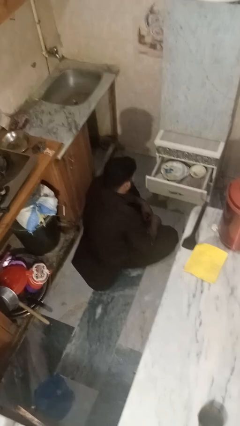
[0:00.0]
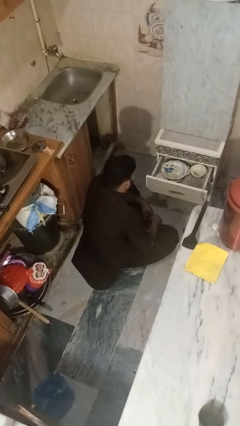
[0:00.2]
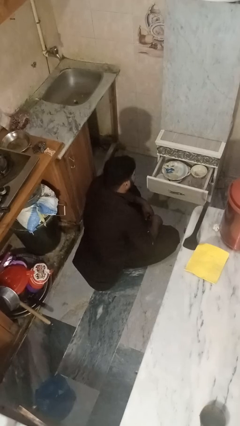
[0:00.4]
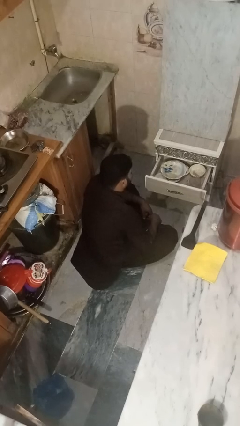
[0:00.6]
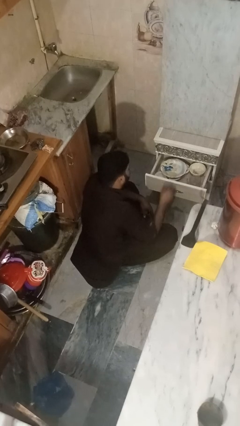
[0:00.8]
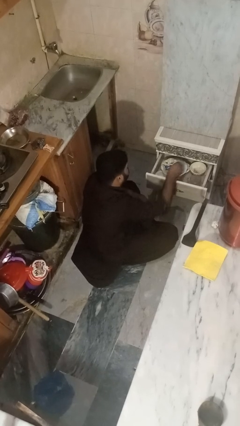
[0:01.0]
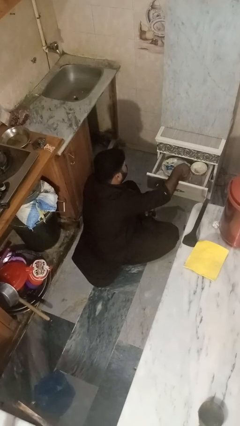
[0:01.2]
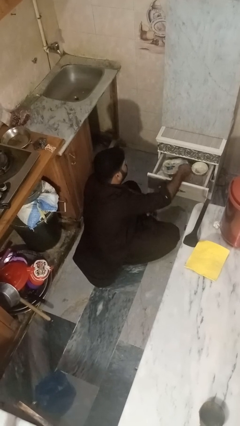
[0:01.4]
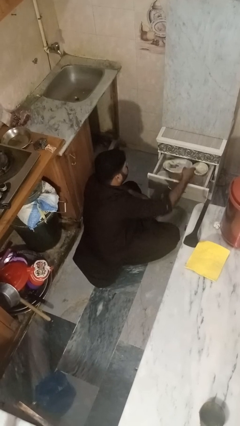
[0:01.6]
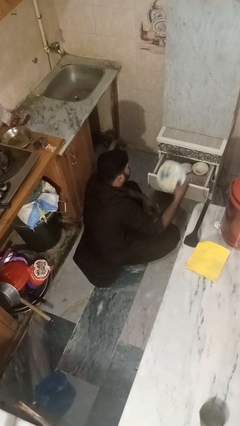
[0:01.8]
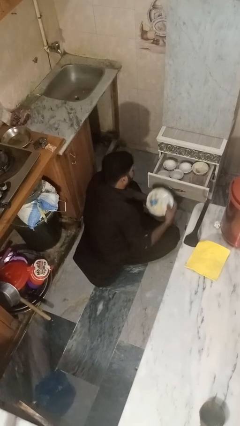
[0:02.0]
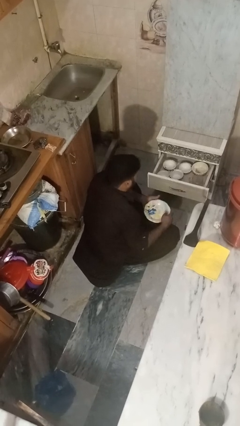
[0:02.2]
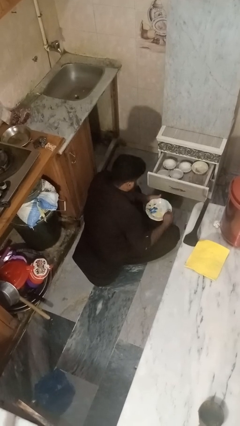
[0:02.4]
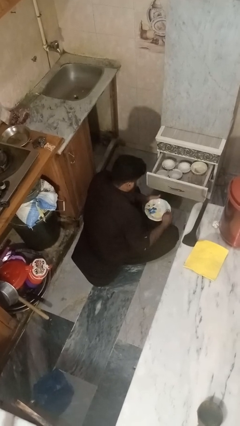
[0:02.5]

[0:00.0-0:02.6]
person takes object from kitchen drawer

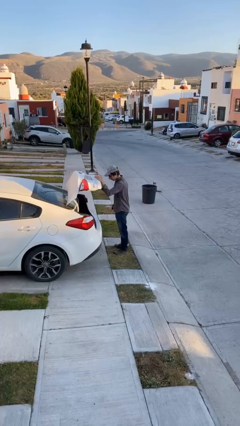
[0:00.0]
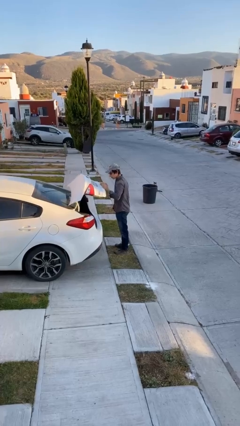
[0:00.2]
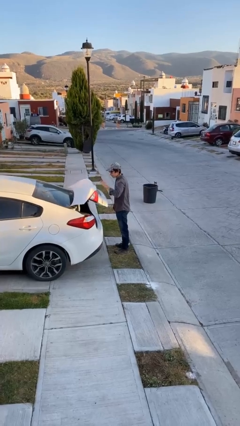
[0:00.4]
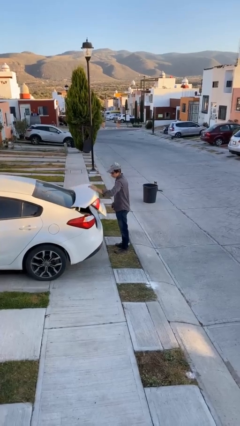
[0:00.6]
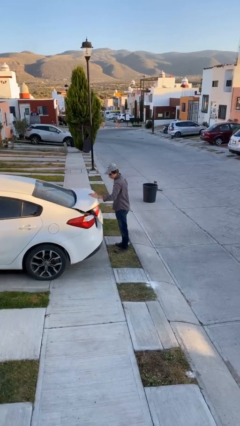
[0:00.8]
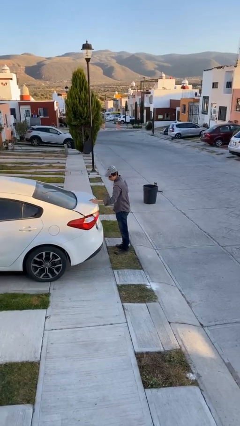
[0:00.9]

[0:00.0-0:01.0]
person closes car trunk

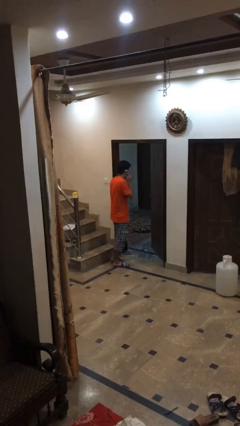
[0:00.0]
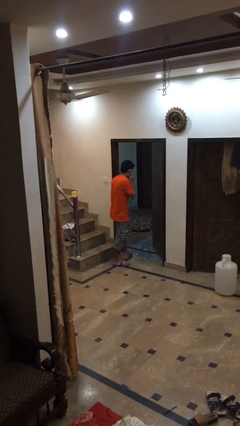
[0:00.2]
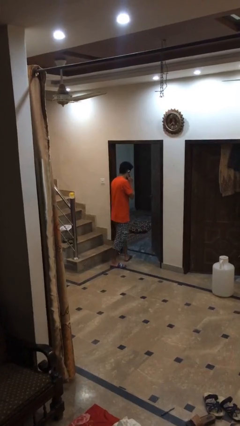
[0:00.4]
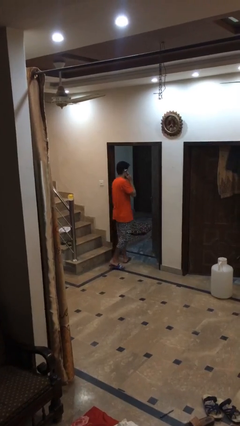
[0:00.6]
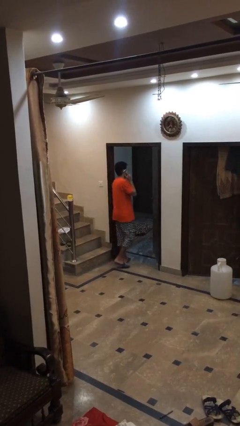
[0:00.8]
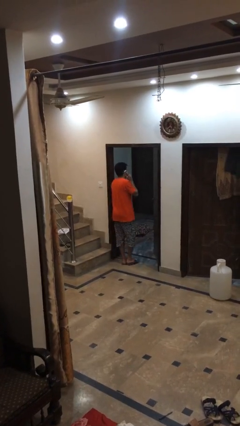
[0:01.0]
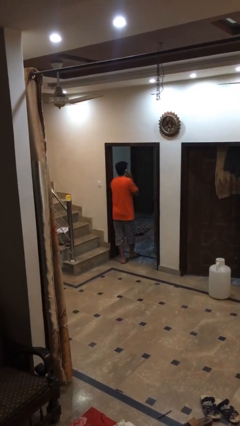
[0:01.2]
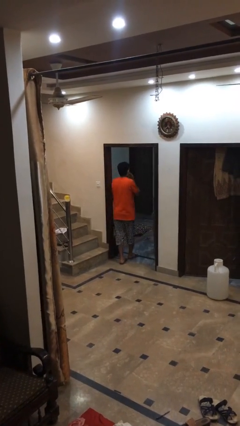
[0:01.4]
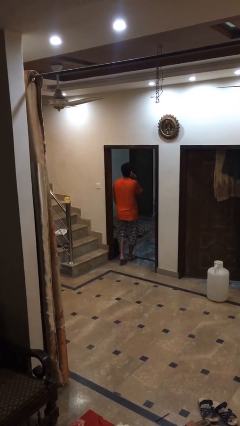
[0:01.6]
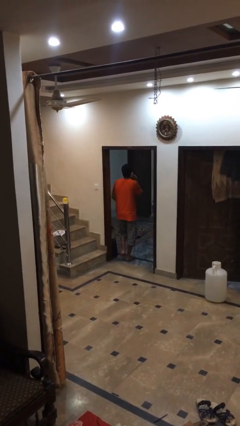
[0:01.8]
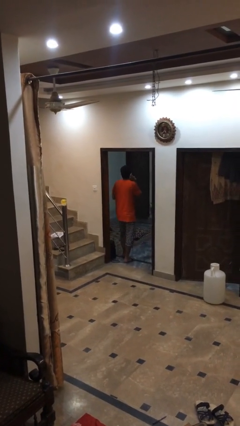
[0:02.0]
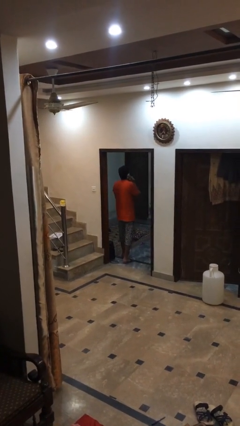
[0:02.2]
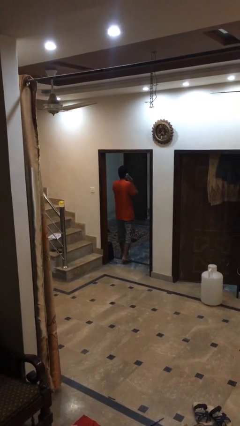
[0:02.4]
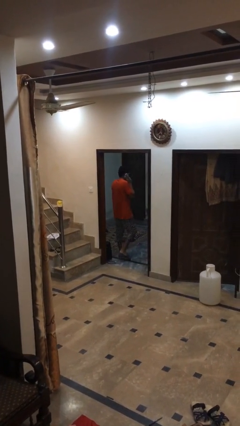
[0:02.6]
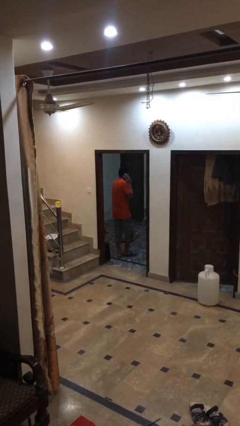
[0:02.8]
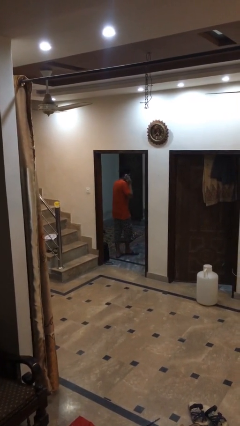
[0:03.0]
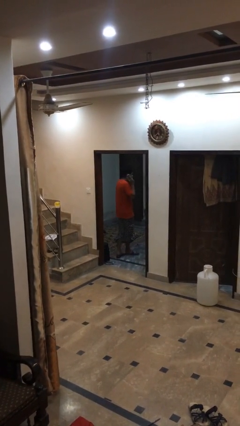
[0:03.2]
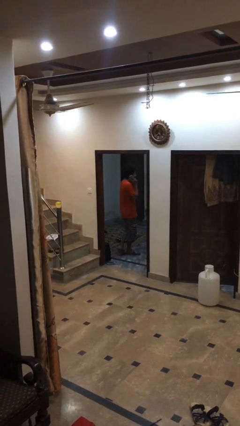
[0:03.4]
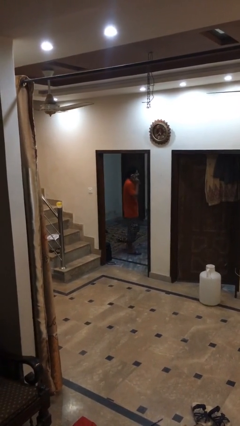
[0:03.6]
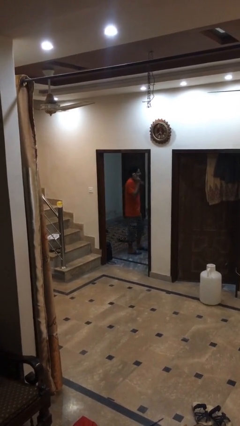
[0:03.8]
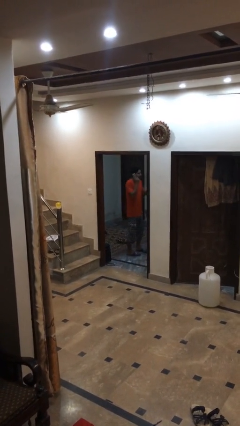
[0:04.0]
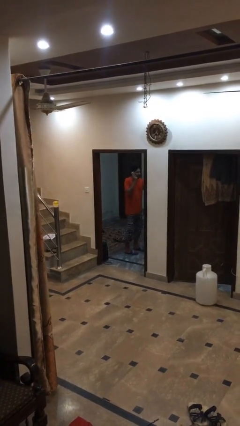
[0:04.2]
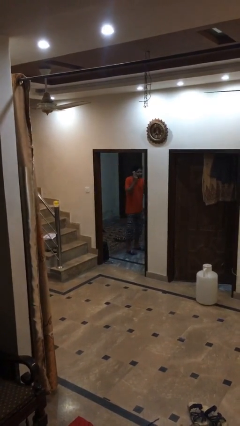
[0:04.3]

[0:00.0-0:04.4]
person exits scene through structure

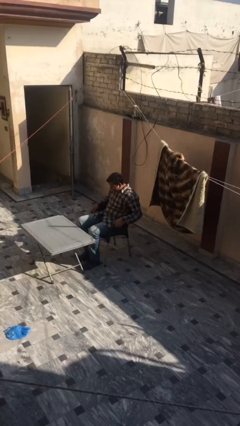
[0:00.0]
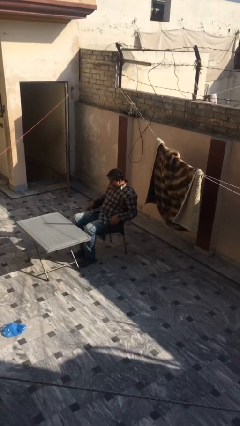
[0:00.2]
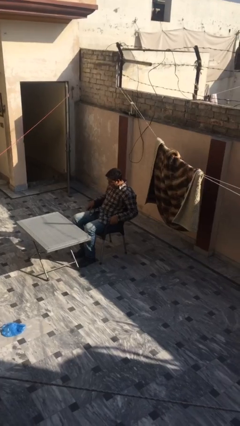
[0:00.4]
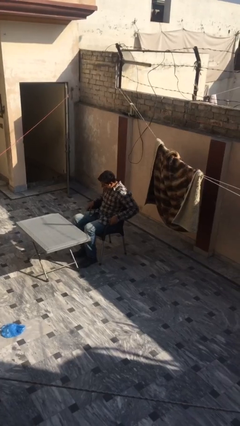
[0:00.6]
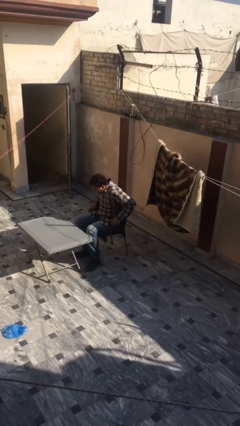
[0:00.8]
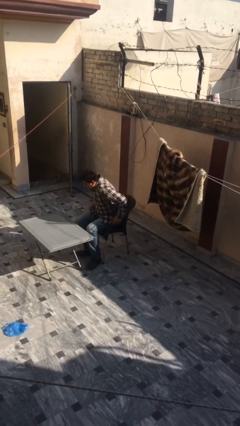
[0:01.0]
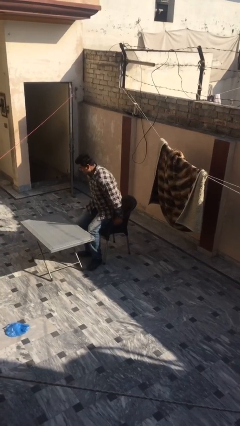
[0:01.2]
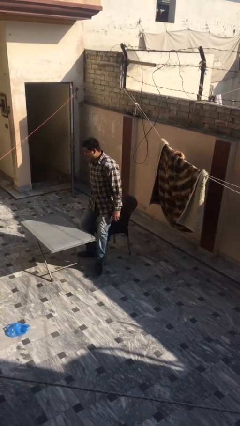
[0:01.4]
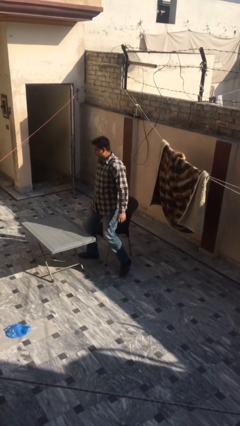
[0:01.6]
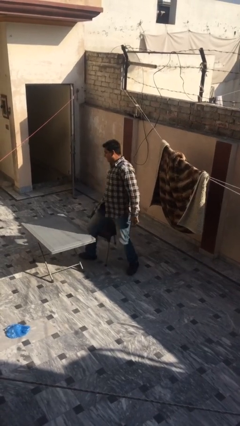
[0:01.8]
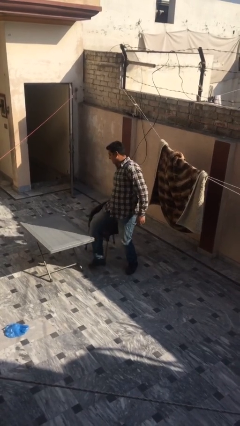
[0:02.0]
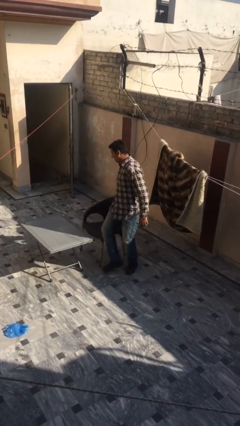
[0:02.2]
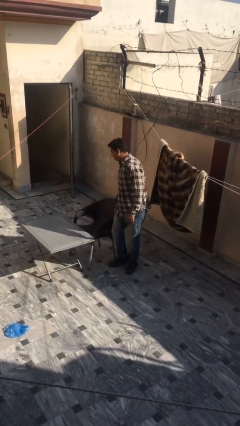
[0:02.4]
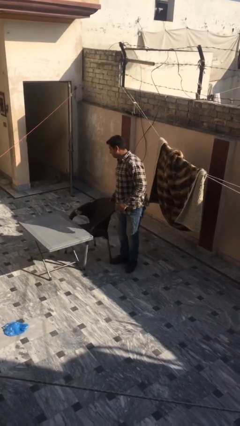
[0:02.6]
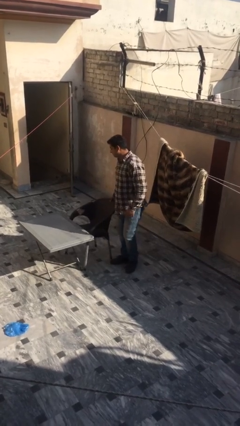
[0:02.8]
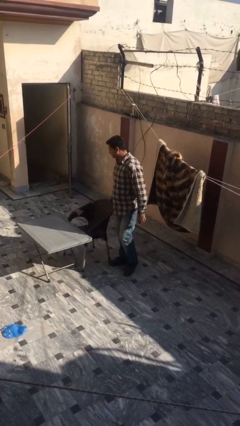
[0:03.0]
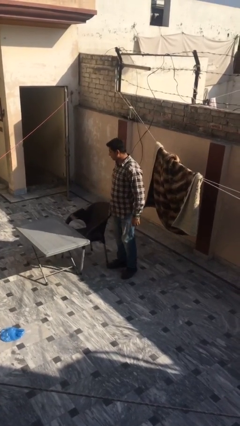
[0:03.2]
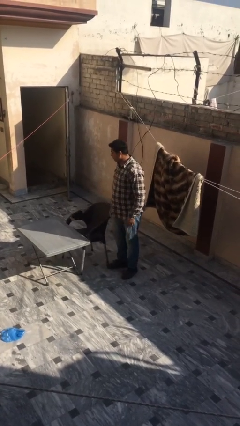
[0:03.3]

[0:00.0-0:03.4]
person stands up

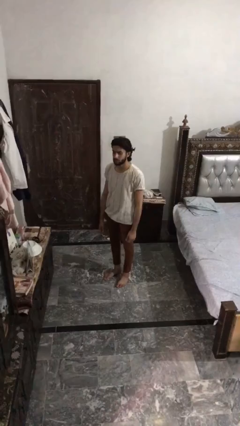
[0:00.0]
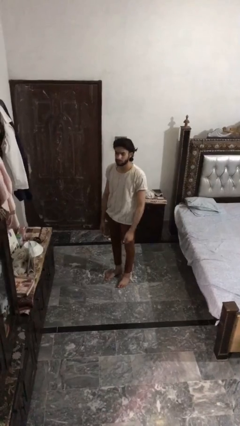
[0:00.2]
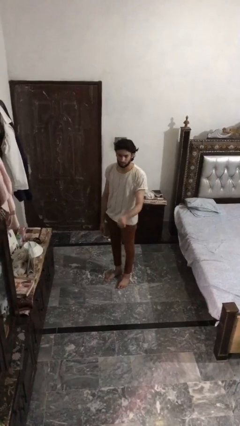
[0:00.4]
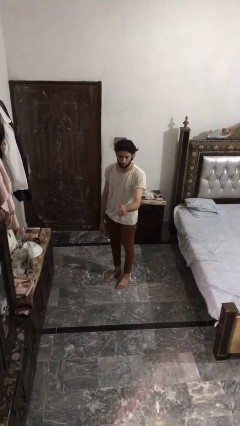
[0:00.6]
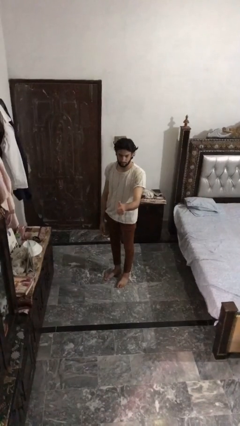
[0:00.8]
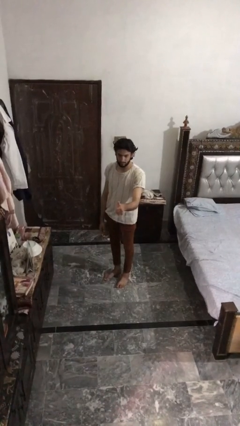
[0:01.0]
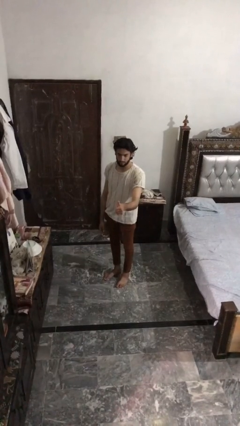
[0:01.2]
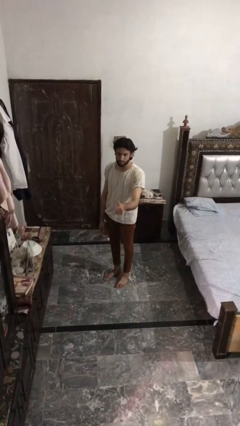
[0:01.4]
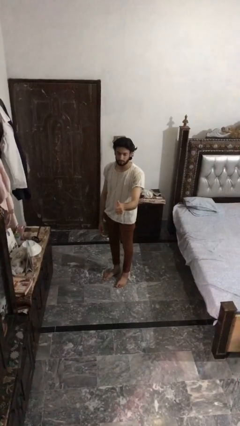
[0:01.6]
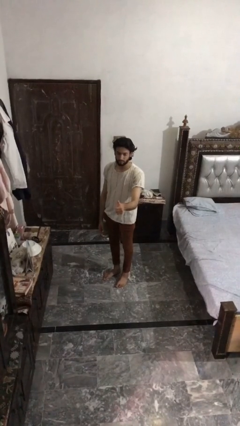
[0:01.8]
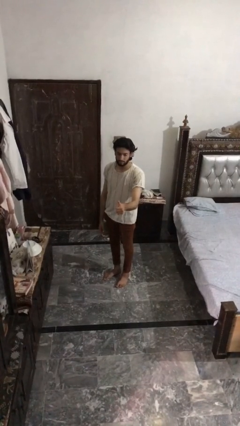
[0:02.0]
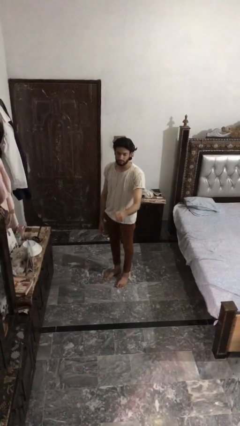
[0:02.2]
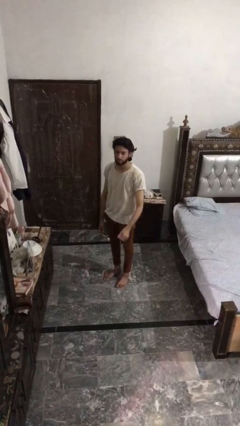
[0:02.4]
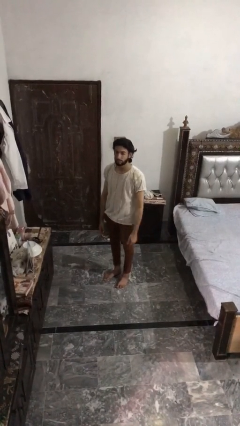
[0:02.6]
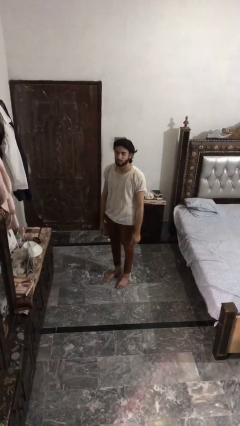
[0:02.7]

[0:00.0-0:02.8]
person gestures thumbs up

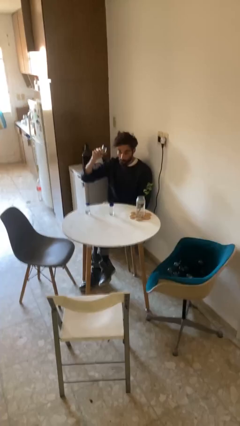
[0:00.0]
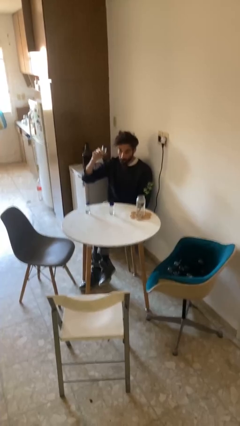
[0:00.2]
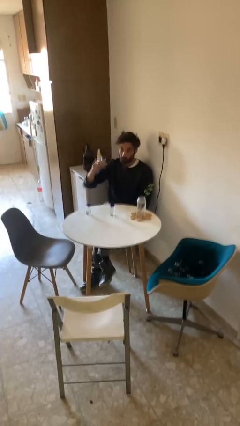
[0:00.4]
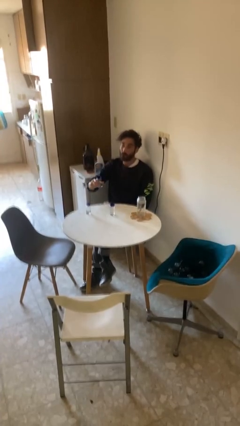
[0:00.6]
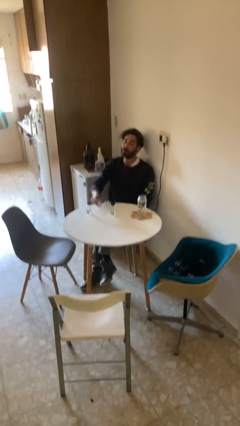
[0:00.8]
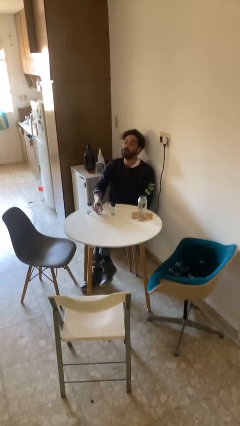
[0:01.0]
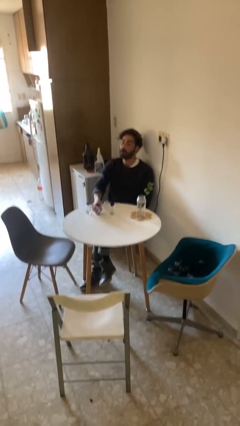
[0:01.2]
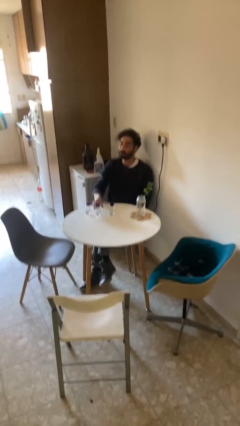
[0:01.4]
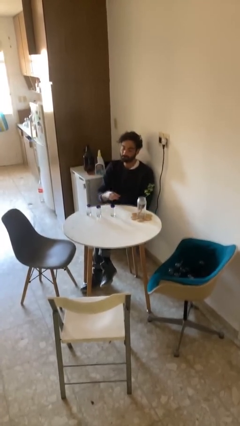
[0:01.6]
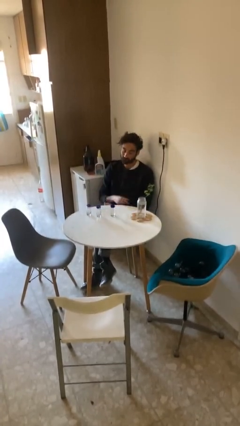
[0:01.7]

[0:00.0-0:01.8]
person puts down object on table

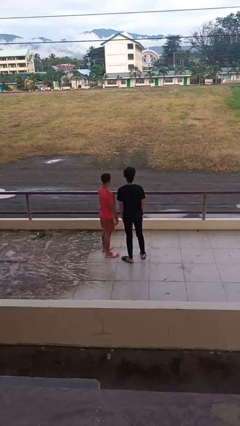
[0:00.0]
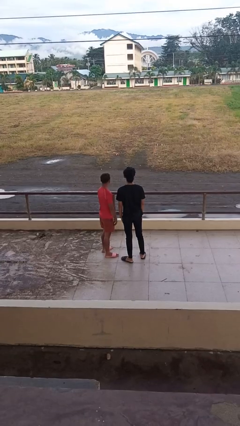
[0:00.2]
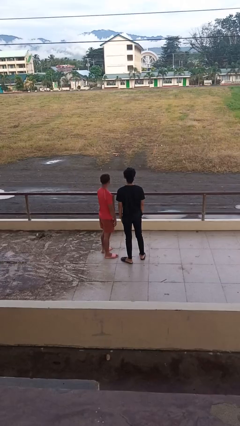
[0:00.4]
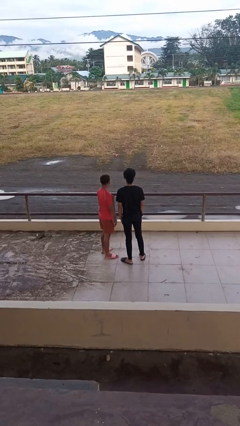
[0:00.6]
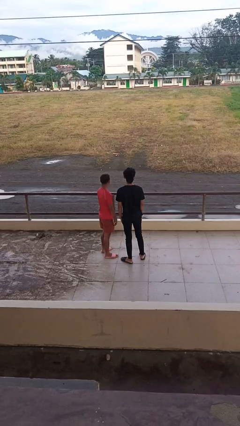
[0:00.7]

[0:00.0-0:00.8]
person nudges person with elbow

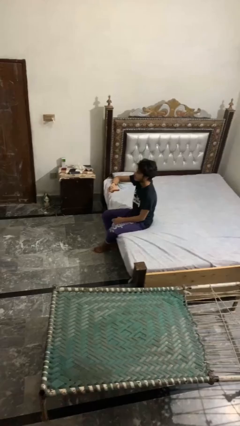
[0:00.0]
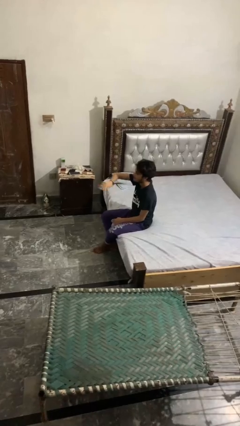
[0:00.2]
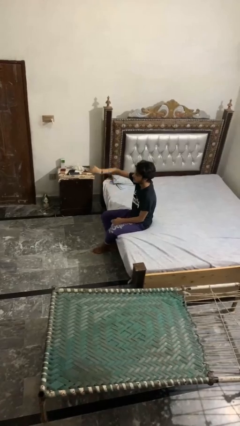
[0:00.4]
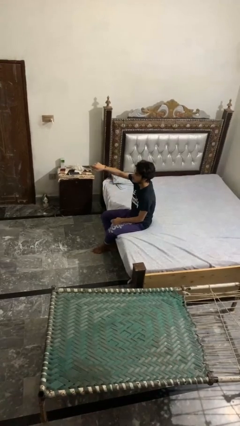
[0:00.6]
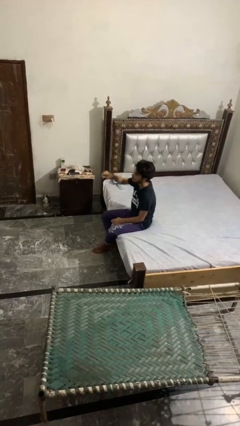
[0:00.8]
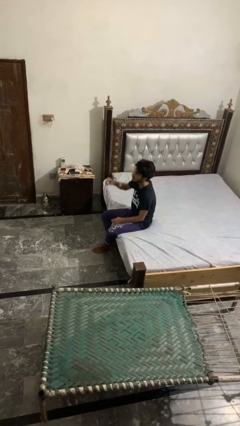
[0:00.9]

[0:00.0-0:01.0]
person gestures swipe right
